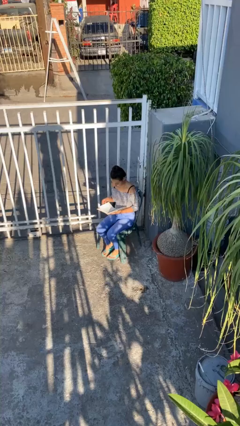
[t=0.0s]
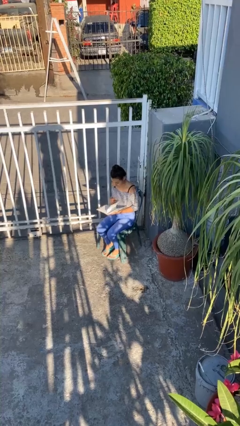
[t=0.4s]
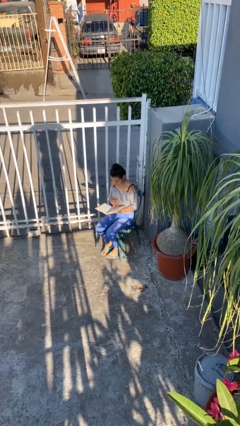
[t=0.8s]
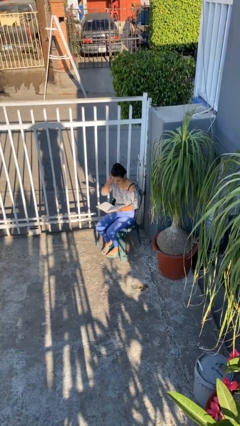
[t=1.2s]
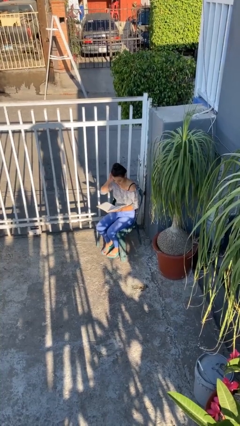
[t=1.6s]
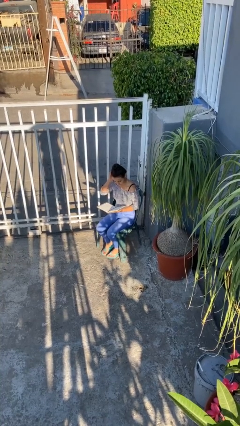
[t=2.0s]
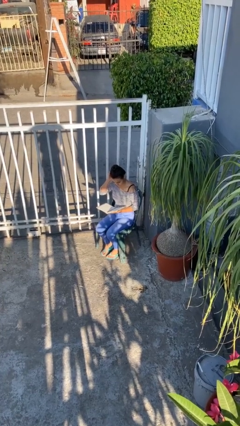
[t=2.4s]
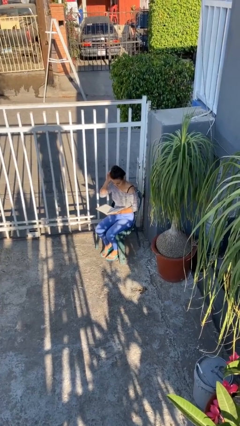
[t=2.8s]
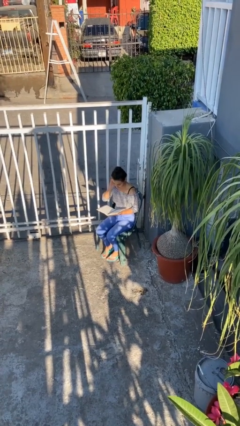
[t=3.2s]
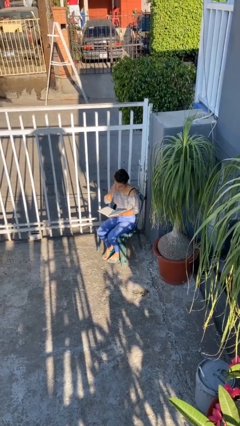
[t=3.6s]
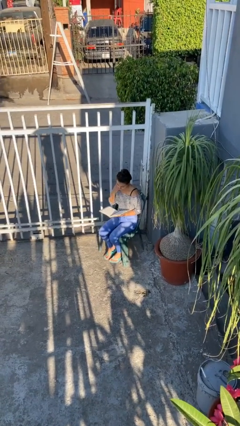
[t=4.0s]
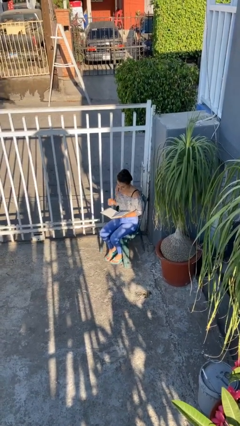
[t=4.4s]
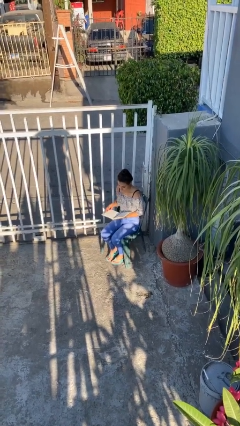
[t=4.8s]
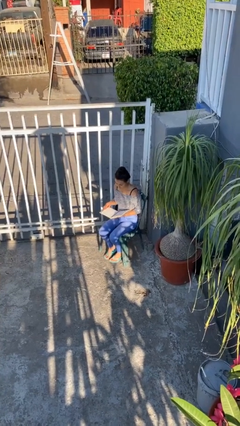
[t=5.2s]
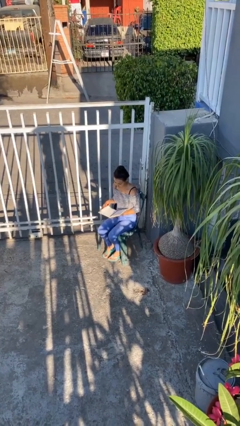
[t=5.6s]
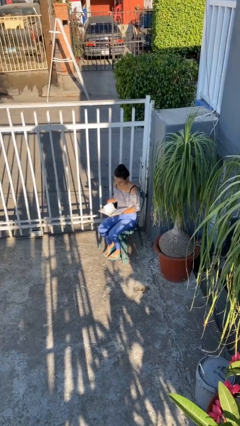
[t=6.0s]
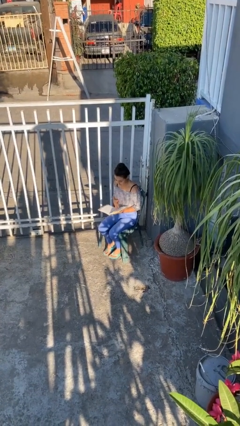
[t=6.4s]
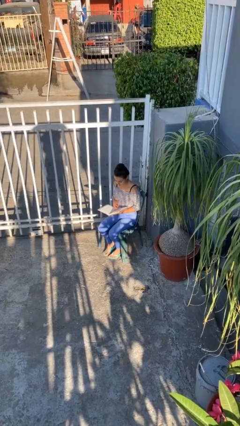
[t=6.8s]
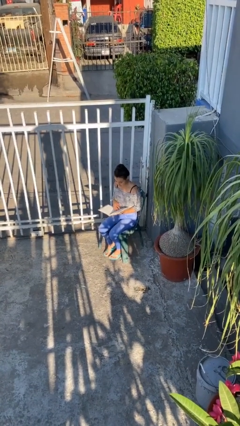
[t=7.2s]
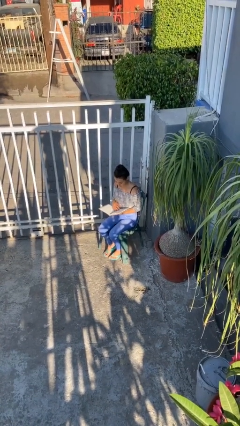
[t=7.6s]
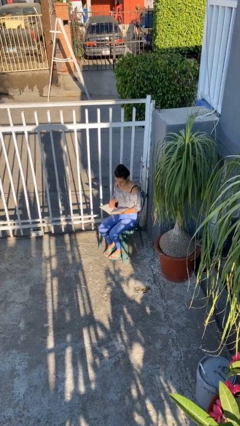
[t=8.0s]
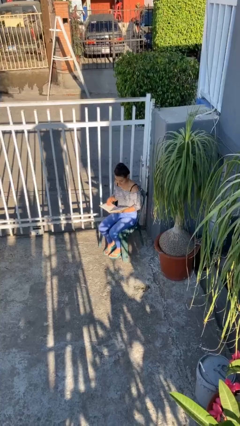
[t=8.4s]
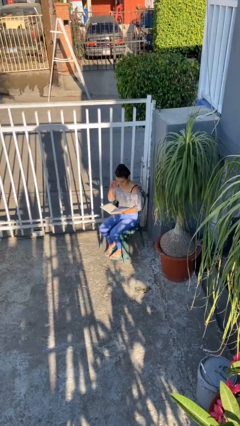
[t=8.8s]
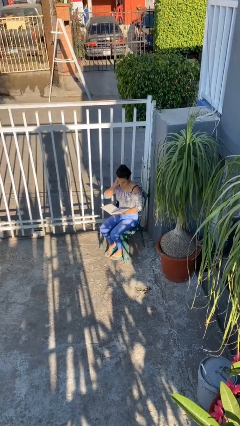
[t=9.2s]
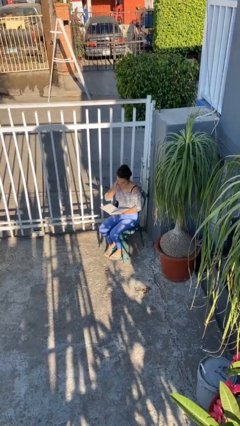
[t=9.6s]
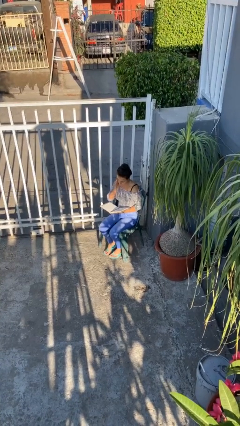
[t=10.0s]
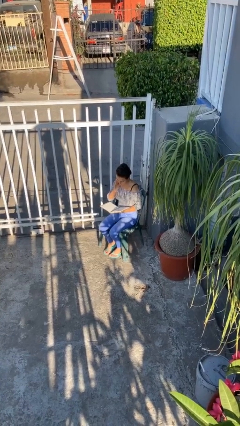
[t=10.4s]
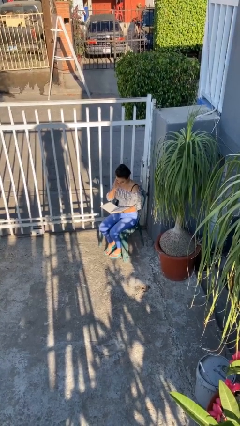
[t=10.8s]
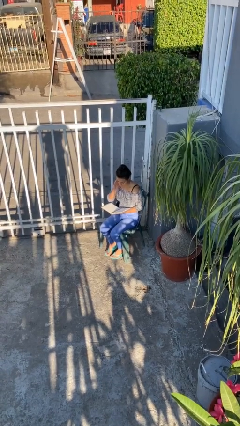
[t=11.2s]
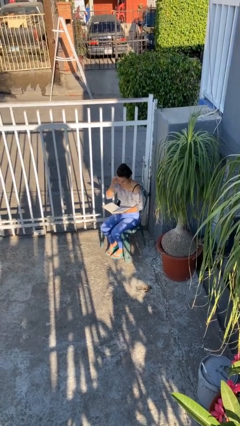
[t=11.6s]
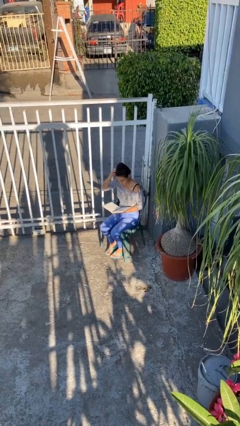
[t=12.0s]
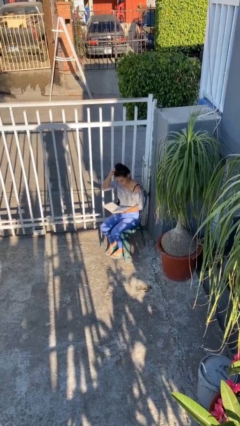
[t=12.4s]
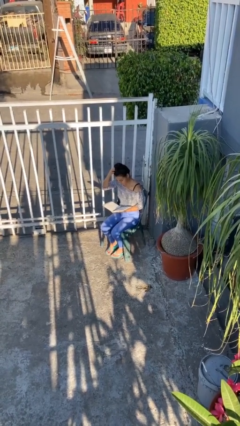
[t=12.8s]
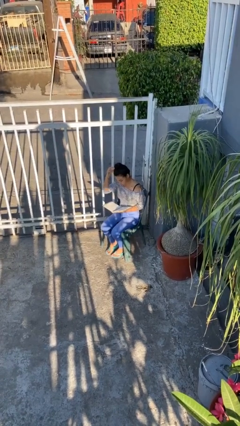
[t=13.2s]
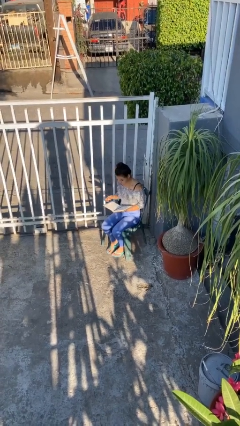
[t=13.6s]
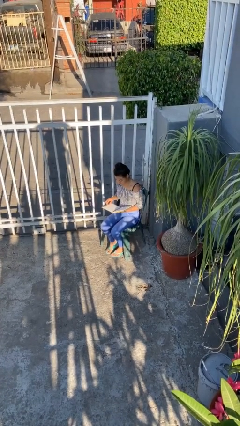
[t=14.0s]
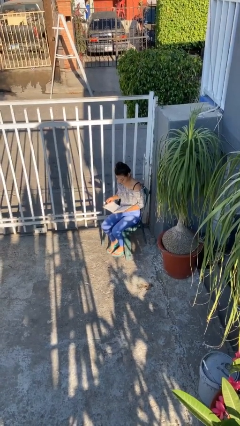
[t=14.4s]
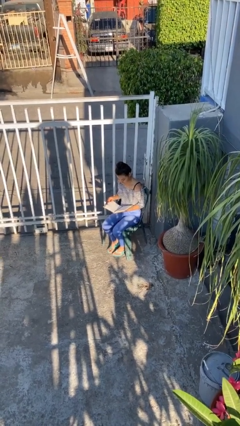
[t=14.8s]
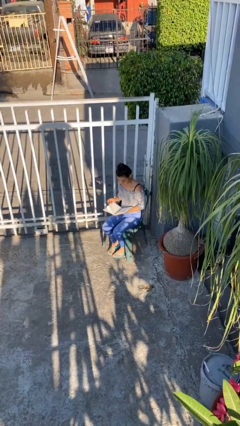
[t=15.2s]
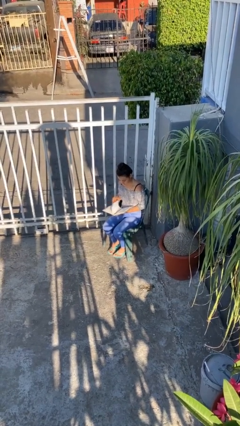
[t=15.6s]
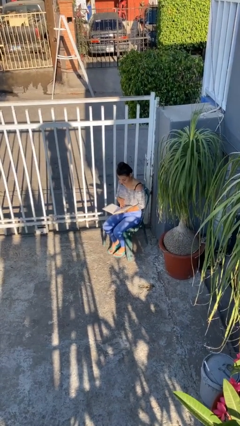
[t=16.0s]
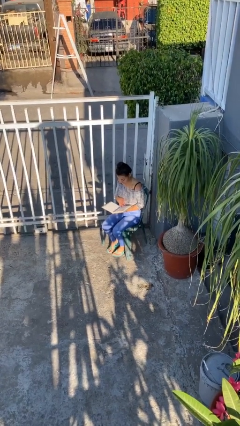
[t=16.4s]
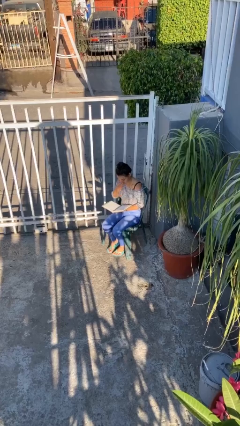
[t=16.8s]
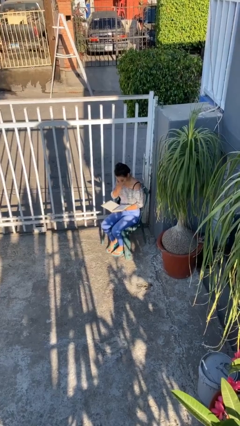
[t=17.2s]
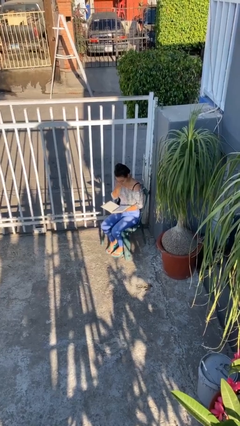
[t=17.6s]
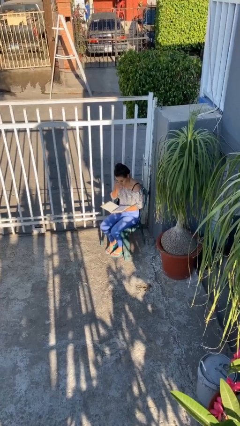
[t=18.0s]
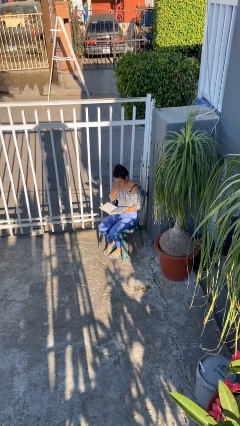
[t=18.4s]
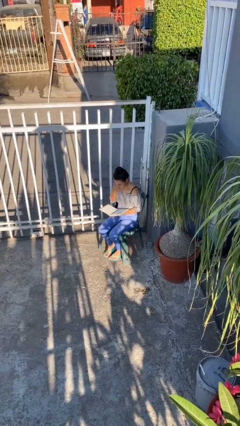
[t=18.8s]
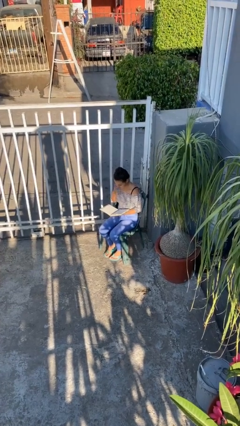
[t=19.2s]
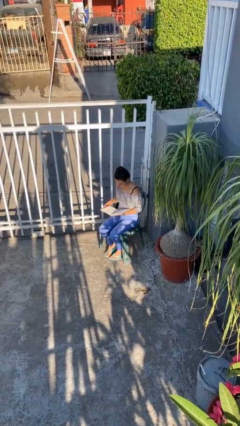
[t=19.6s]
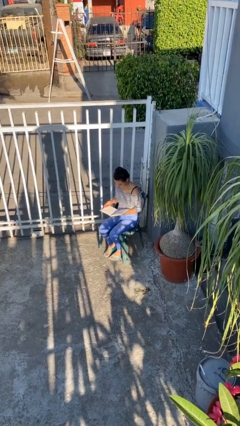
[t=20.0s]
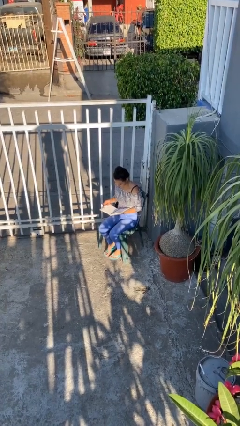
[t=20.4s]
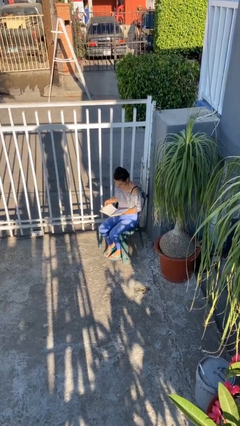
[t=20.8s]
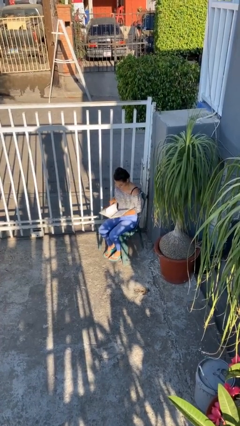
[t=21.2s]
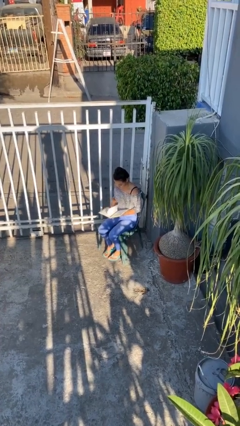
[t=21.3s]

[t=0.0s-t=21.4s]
person reads document

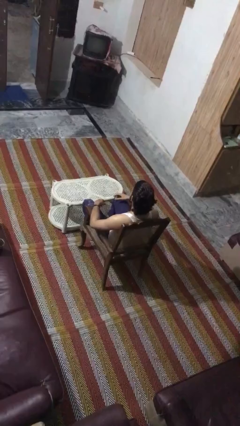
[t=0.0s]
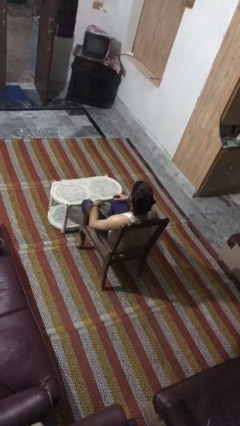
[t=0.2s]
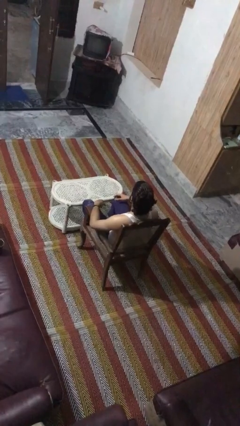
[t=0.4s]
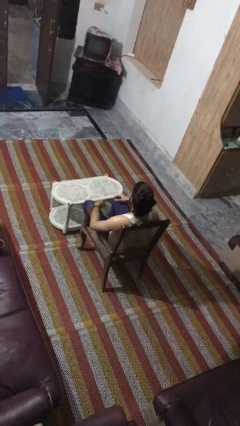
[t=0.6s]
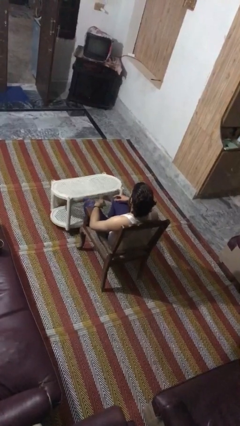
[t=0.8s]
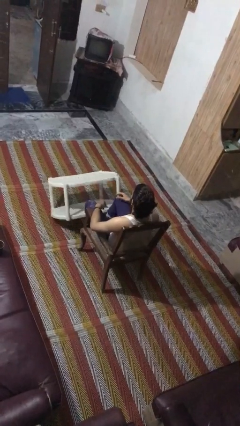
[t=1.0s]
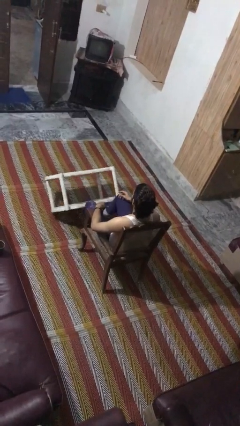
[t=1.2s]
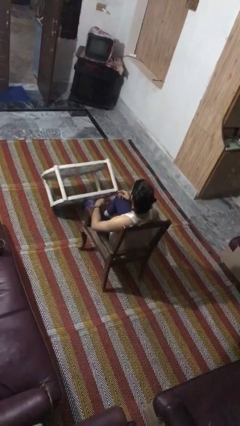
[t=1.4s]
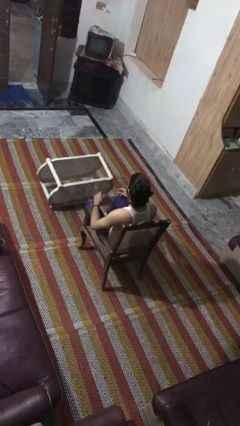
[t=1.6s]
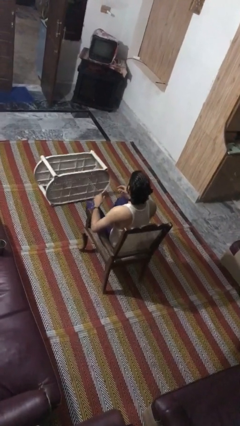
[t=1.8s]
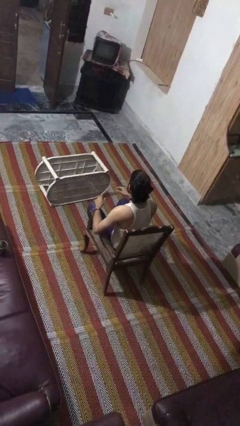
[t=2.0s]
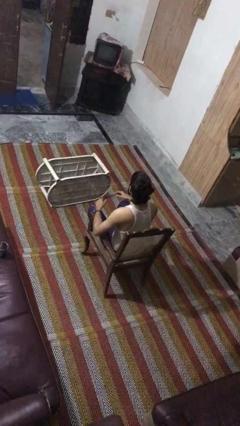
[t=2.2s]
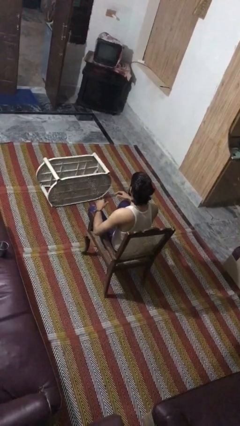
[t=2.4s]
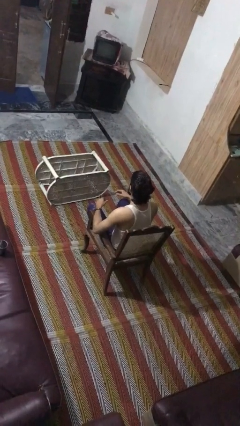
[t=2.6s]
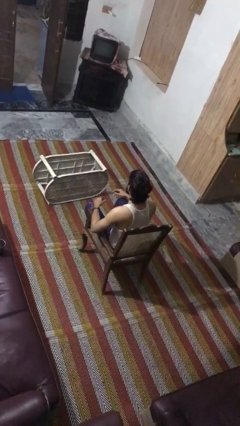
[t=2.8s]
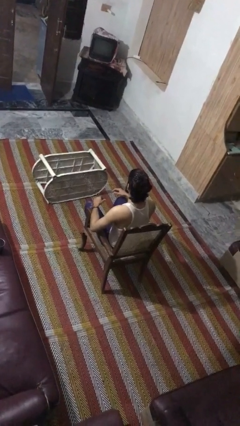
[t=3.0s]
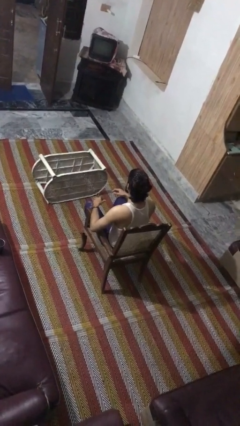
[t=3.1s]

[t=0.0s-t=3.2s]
person knocks over furniture

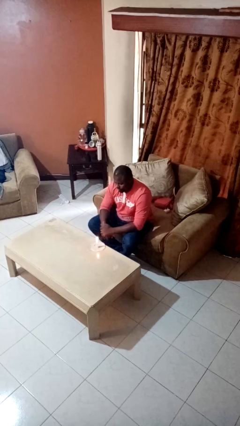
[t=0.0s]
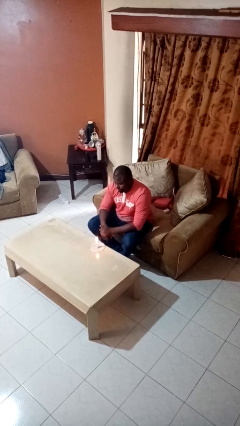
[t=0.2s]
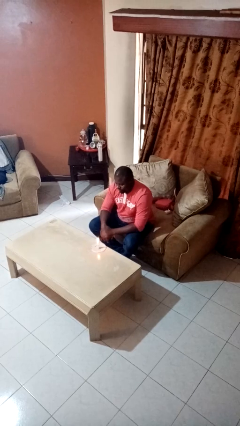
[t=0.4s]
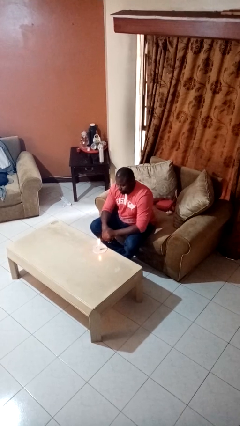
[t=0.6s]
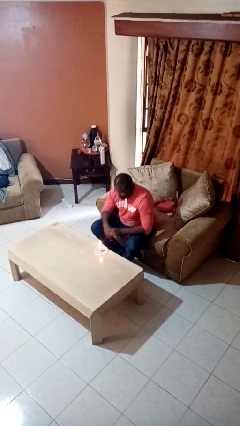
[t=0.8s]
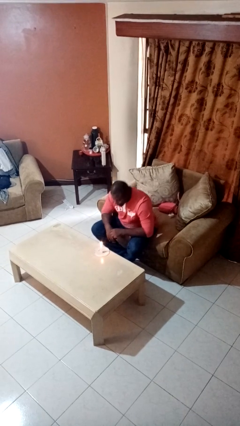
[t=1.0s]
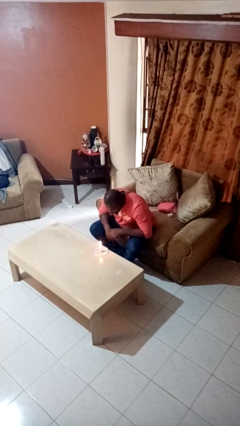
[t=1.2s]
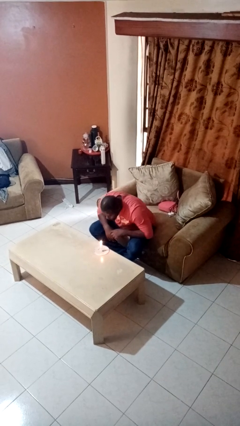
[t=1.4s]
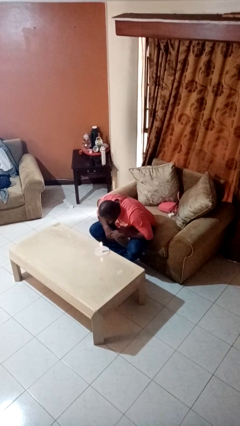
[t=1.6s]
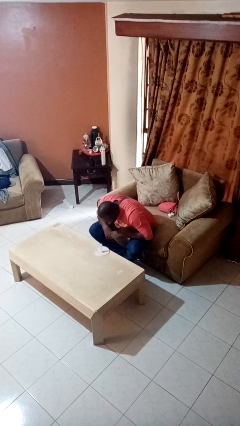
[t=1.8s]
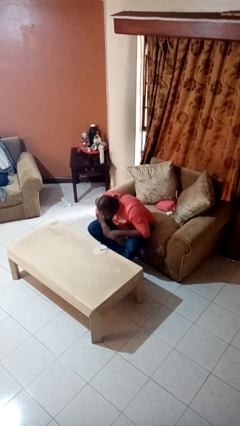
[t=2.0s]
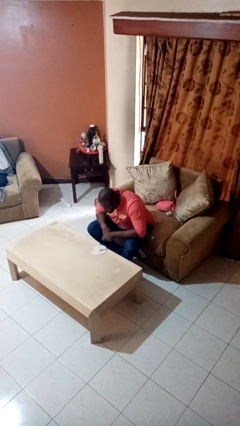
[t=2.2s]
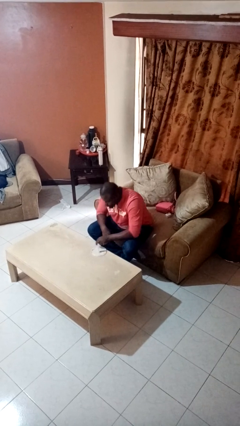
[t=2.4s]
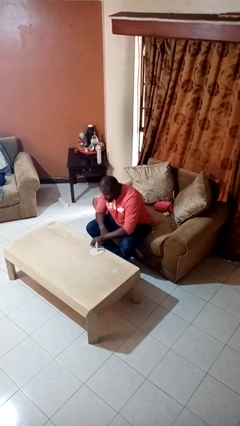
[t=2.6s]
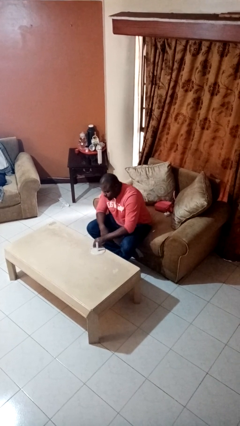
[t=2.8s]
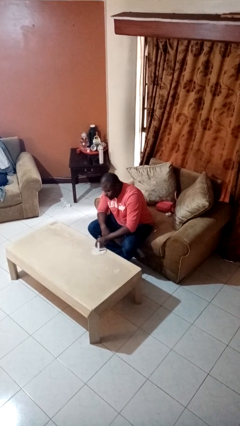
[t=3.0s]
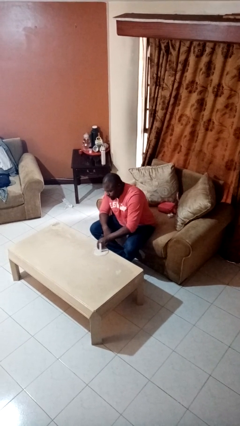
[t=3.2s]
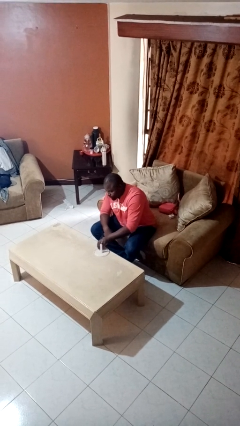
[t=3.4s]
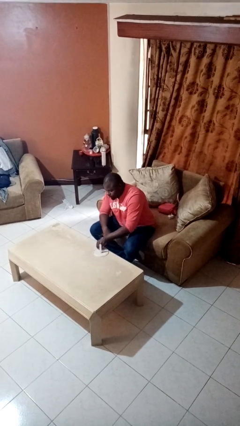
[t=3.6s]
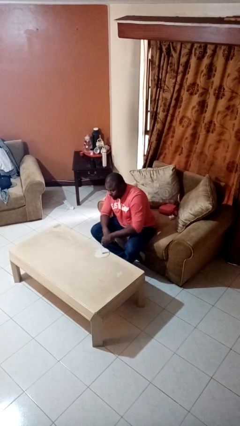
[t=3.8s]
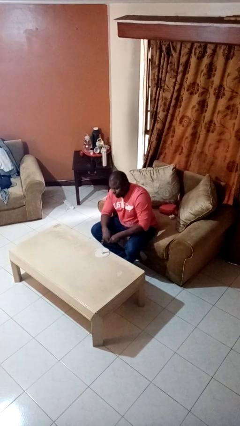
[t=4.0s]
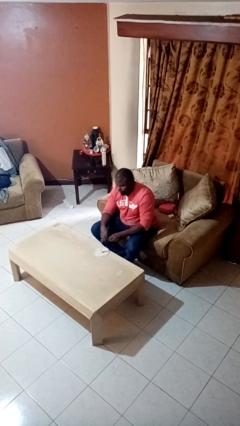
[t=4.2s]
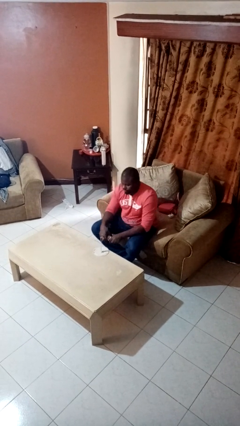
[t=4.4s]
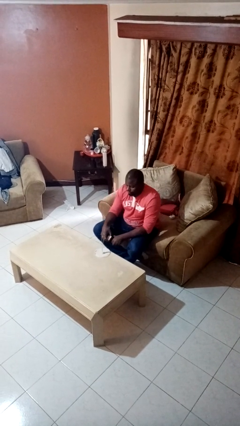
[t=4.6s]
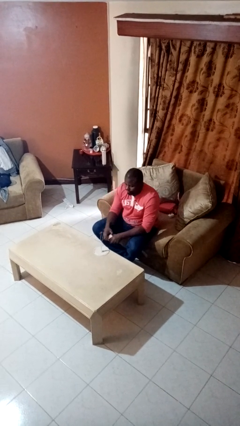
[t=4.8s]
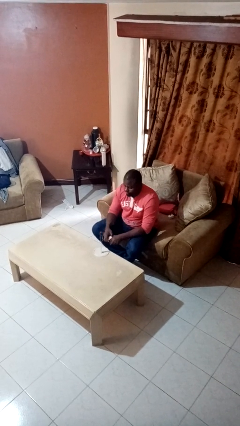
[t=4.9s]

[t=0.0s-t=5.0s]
person extinguishes candle